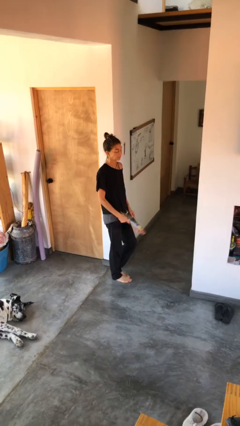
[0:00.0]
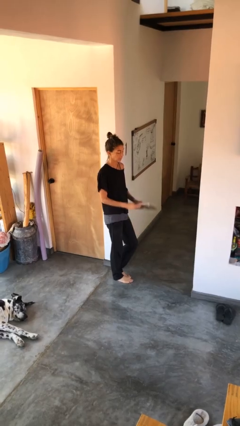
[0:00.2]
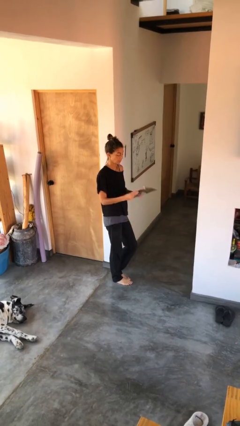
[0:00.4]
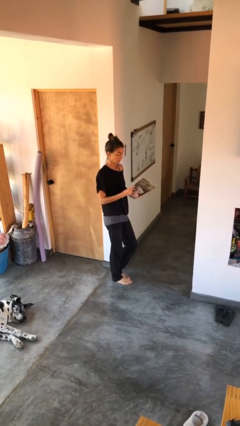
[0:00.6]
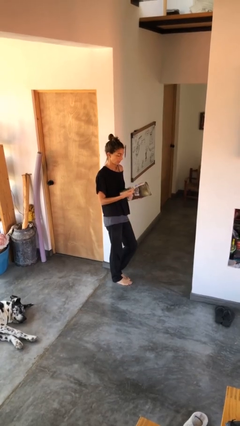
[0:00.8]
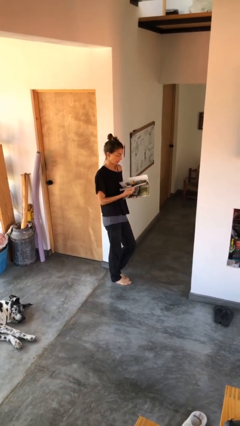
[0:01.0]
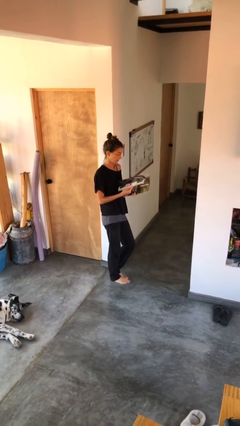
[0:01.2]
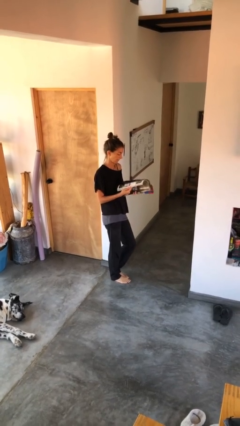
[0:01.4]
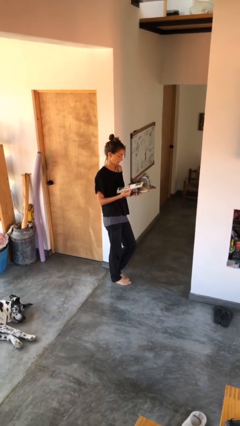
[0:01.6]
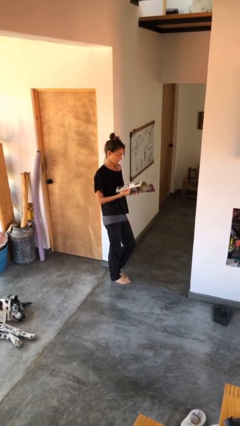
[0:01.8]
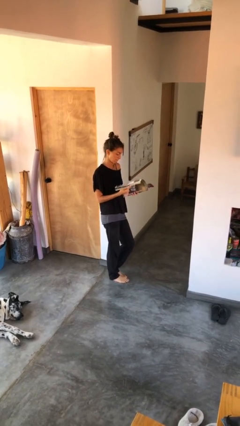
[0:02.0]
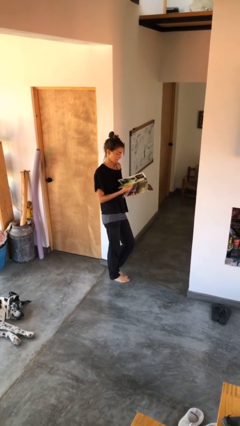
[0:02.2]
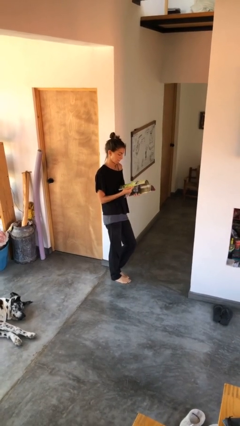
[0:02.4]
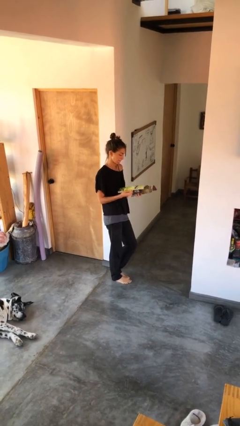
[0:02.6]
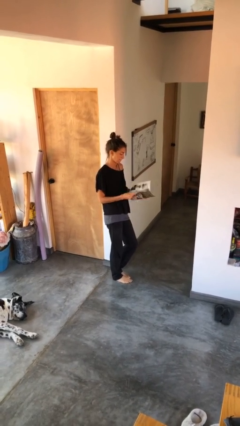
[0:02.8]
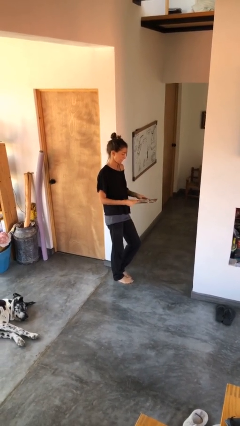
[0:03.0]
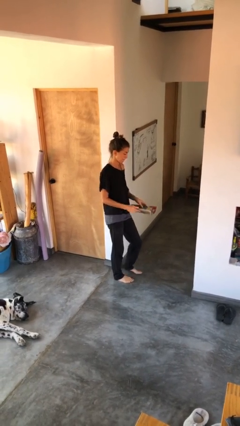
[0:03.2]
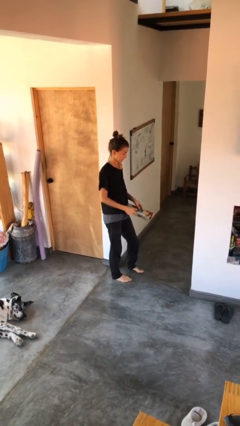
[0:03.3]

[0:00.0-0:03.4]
person reads magazine

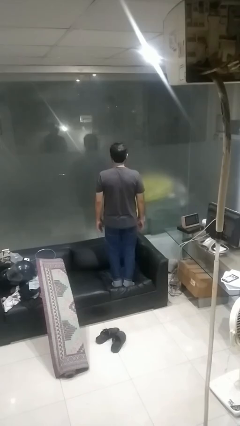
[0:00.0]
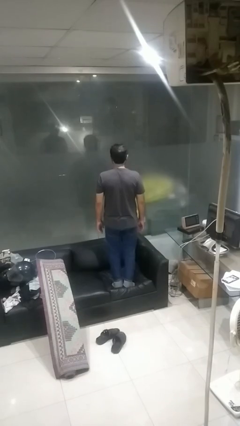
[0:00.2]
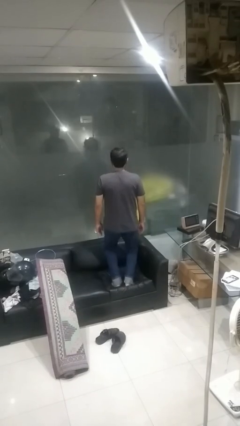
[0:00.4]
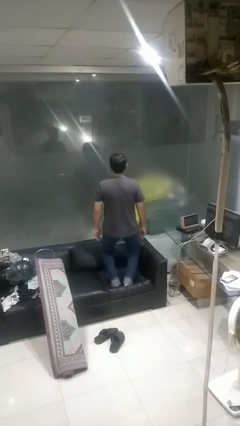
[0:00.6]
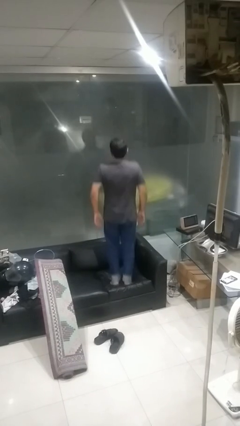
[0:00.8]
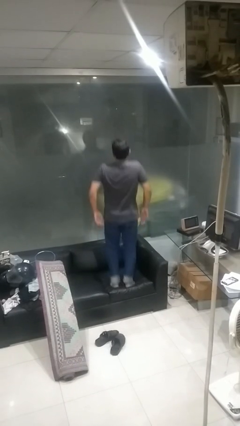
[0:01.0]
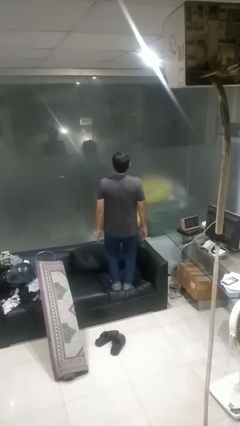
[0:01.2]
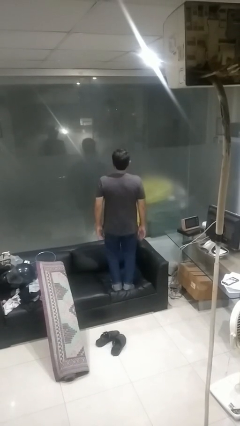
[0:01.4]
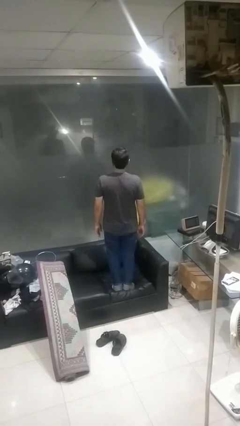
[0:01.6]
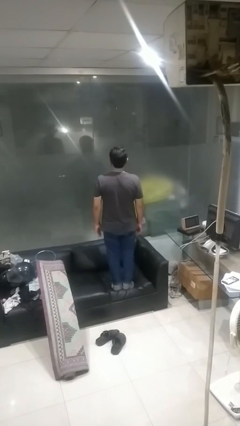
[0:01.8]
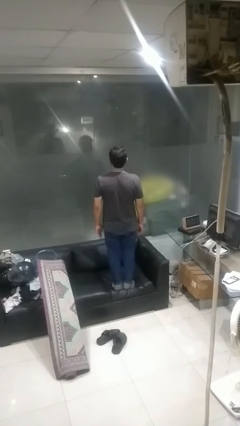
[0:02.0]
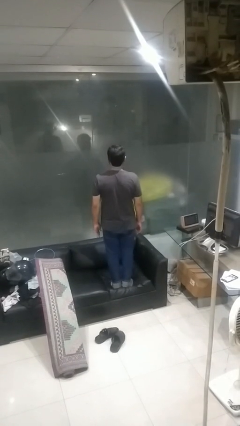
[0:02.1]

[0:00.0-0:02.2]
person jumps on couch

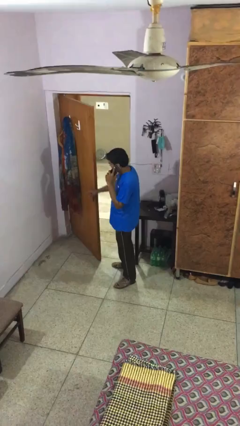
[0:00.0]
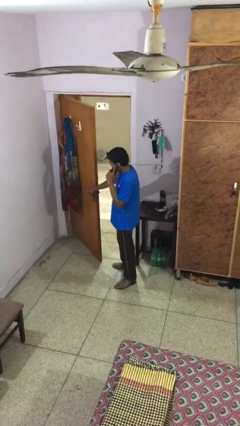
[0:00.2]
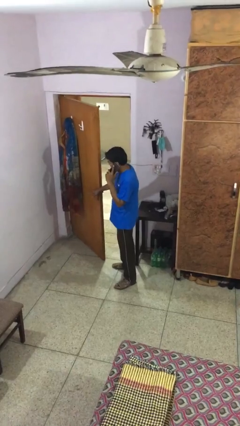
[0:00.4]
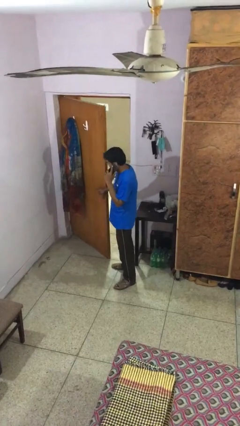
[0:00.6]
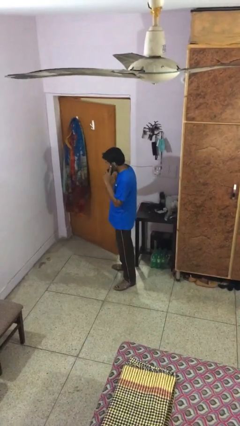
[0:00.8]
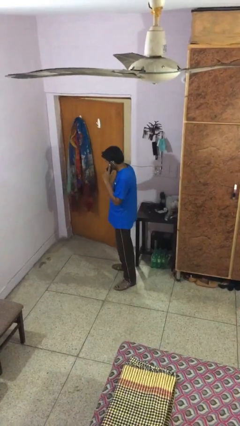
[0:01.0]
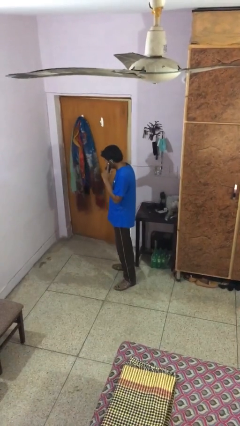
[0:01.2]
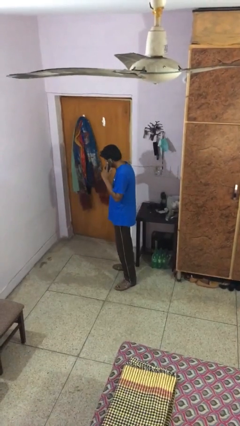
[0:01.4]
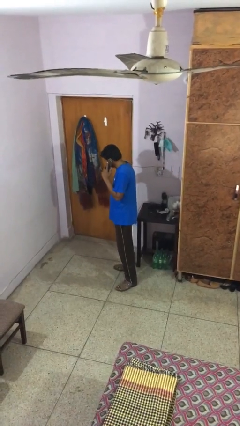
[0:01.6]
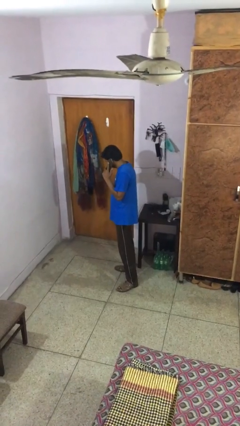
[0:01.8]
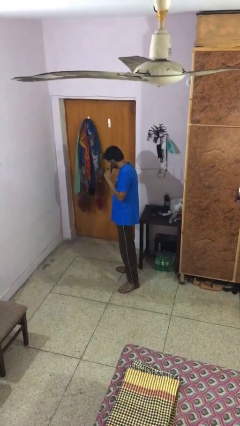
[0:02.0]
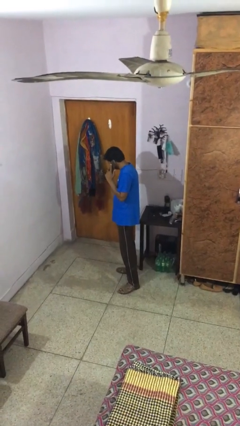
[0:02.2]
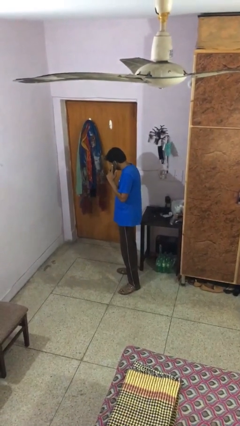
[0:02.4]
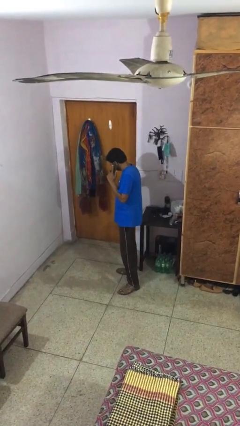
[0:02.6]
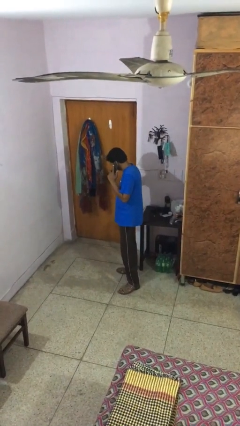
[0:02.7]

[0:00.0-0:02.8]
person closes facility door

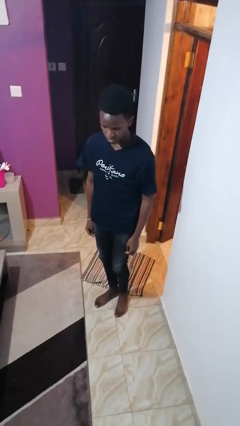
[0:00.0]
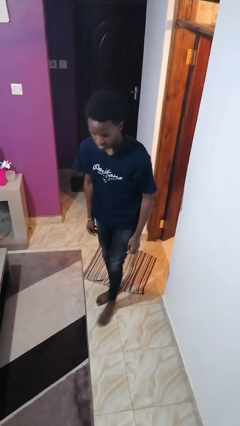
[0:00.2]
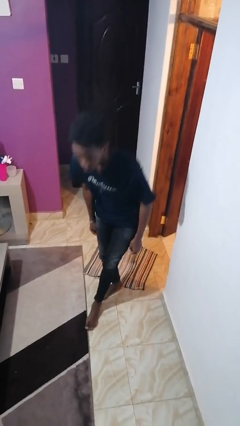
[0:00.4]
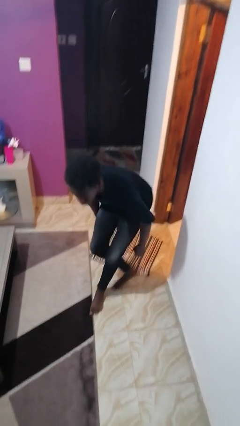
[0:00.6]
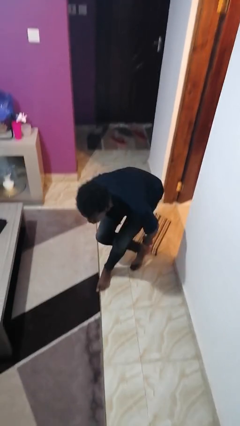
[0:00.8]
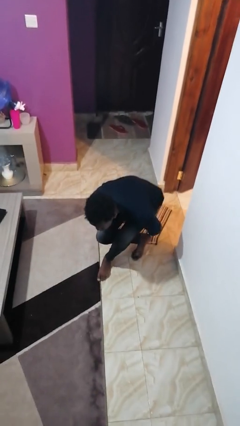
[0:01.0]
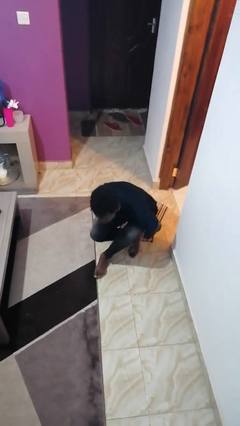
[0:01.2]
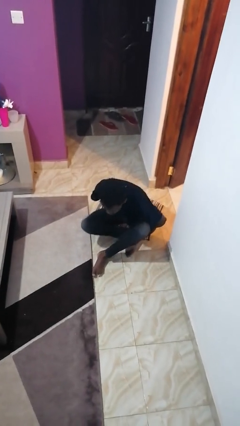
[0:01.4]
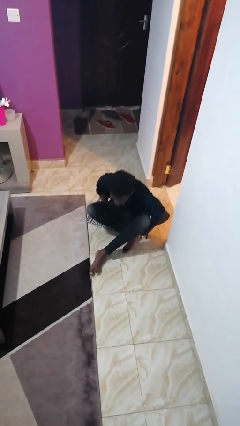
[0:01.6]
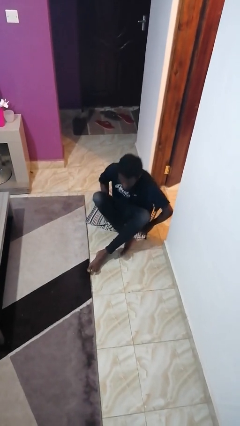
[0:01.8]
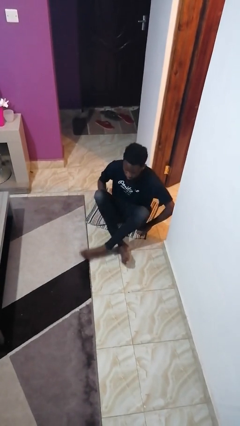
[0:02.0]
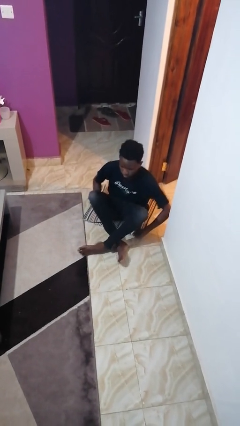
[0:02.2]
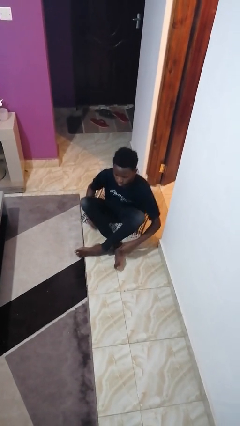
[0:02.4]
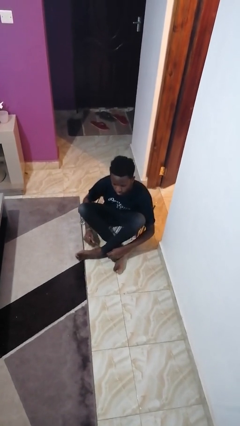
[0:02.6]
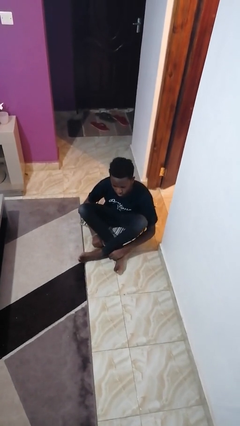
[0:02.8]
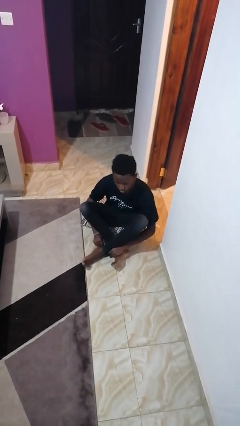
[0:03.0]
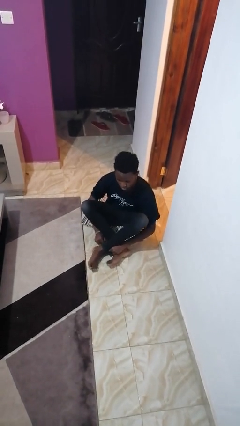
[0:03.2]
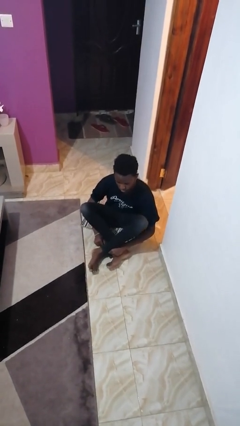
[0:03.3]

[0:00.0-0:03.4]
person sits crisscross

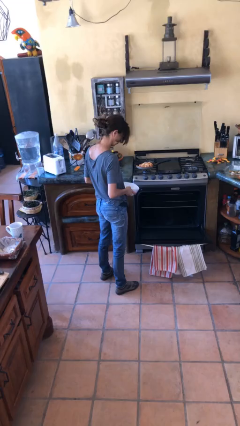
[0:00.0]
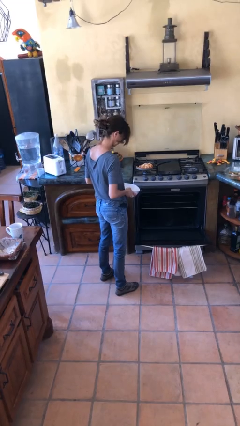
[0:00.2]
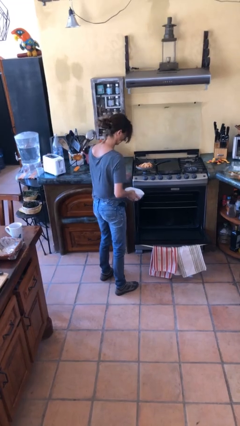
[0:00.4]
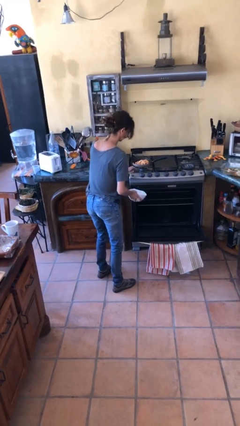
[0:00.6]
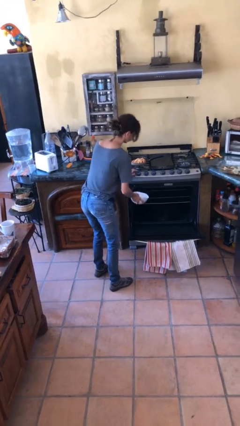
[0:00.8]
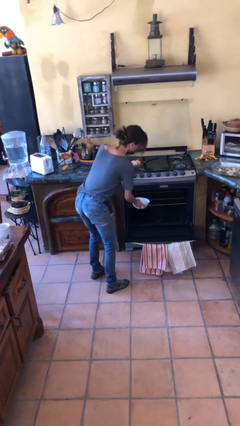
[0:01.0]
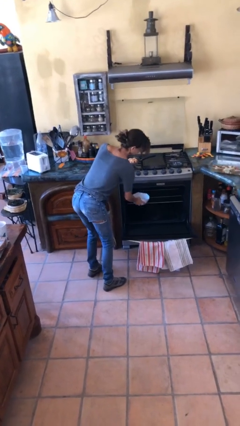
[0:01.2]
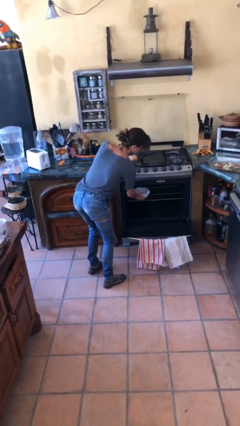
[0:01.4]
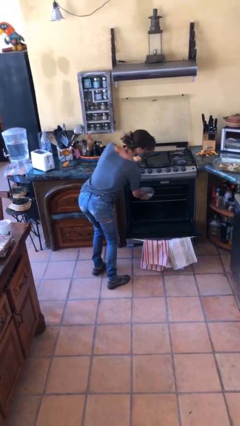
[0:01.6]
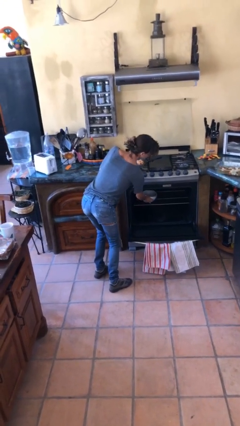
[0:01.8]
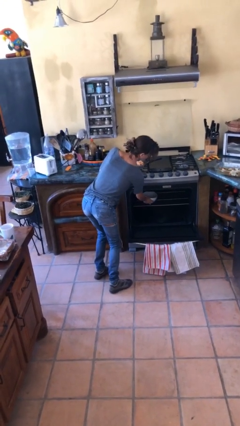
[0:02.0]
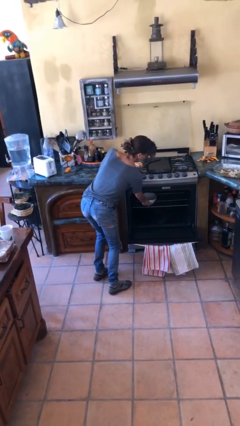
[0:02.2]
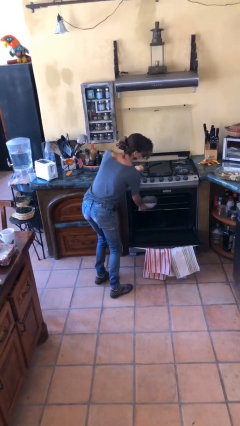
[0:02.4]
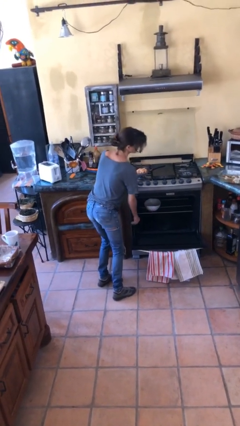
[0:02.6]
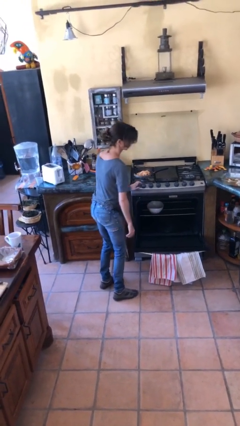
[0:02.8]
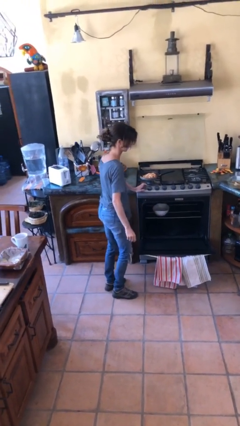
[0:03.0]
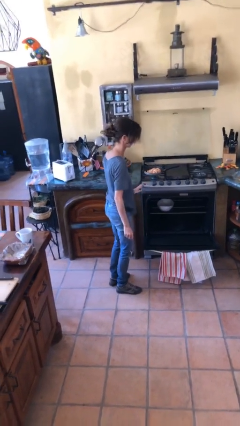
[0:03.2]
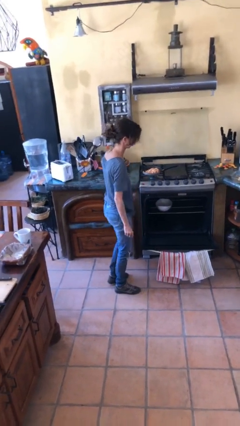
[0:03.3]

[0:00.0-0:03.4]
person puts object into oven

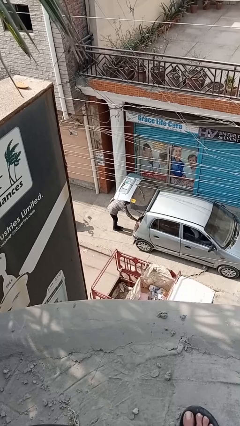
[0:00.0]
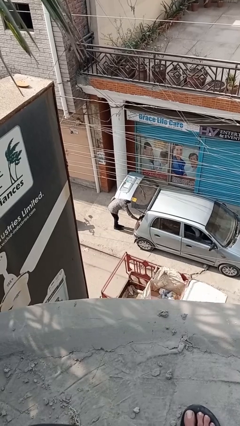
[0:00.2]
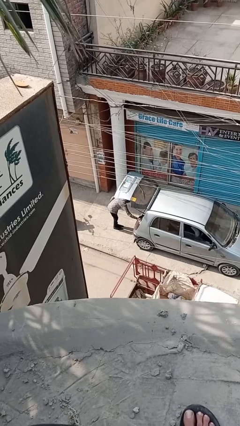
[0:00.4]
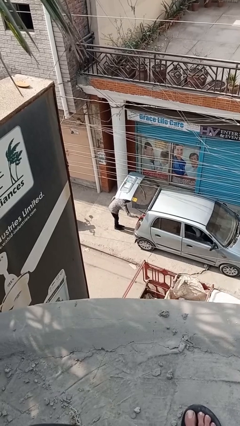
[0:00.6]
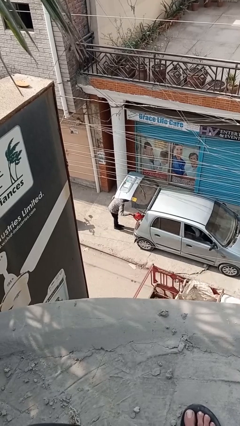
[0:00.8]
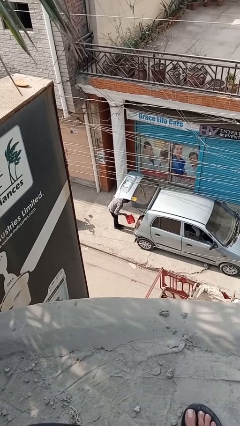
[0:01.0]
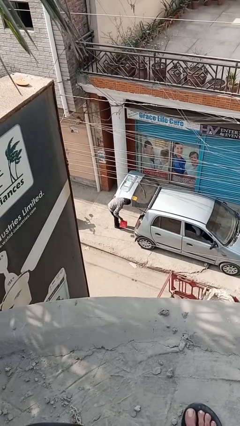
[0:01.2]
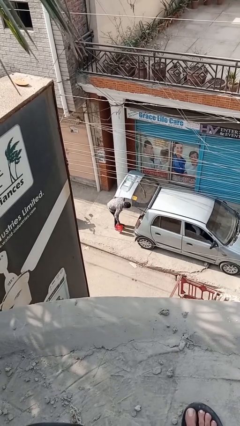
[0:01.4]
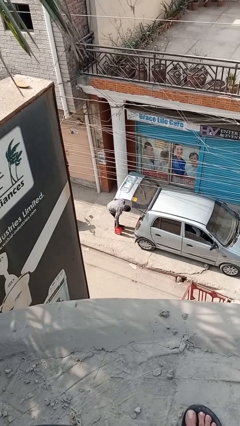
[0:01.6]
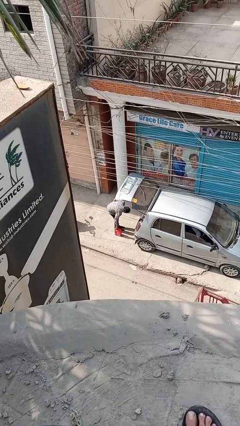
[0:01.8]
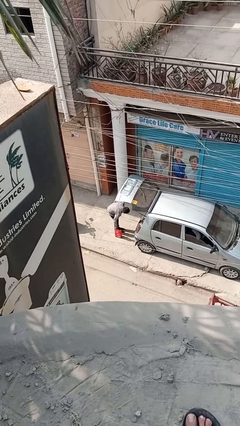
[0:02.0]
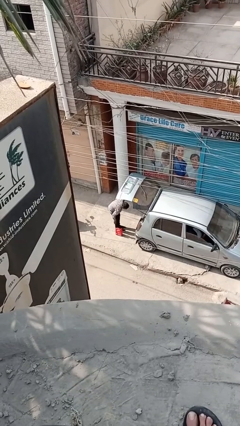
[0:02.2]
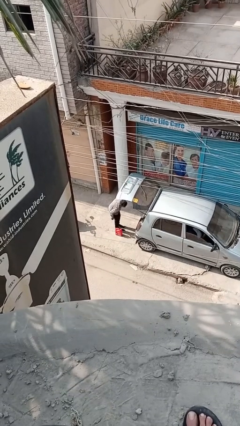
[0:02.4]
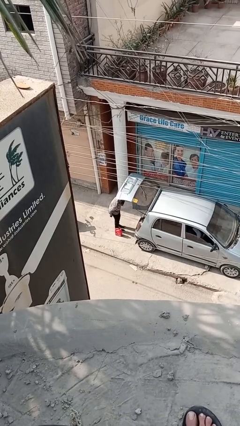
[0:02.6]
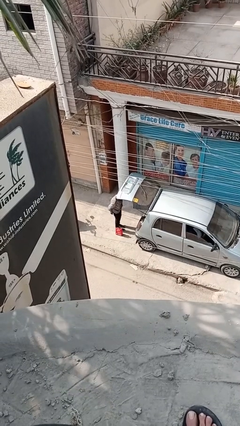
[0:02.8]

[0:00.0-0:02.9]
person unloads car
